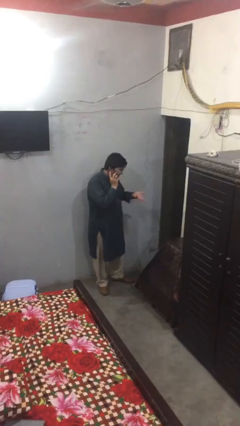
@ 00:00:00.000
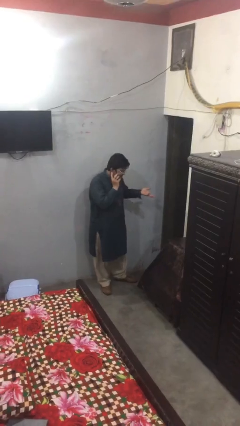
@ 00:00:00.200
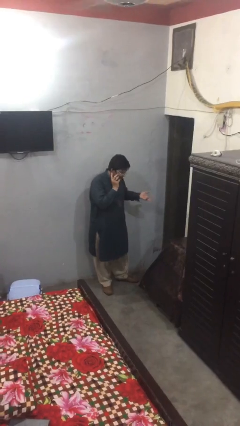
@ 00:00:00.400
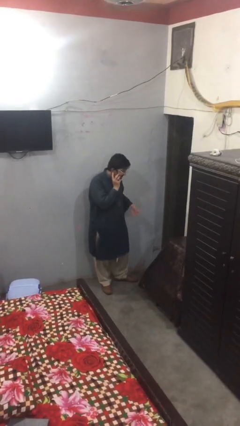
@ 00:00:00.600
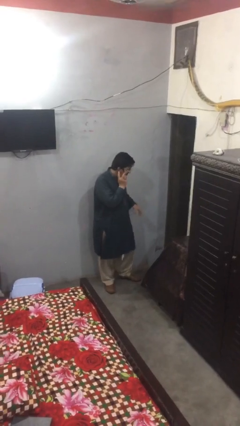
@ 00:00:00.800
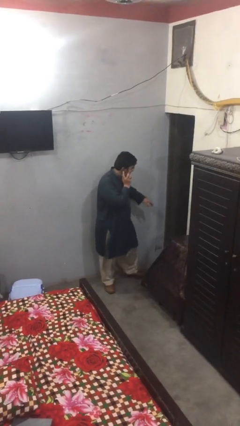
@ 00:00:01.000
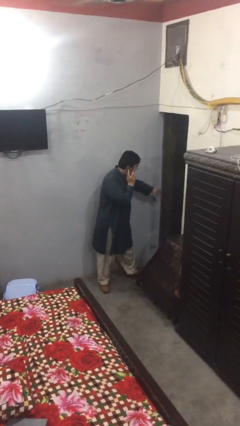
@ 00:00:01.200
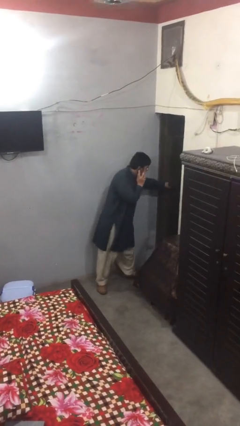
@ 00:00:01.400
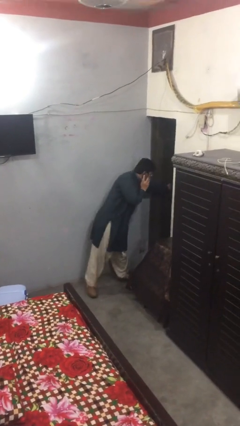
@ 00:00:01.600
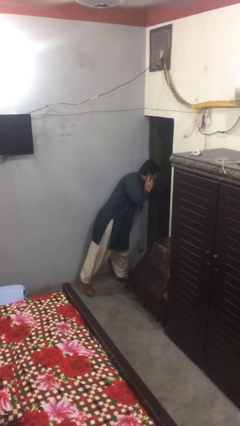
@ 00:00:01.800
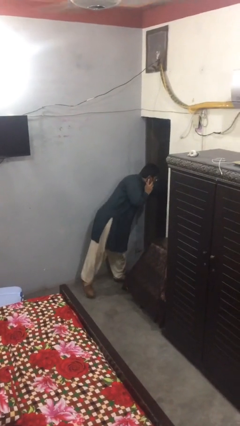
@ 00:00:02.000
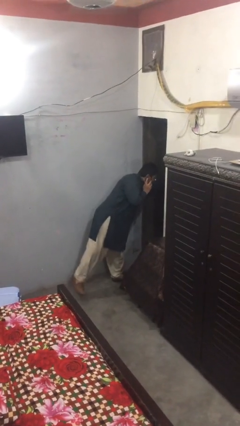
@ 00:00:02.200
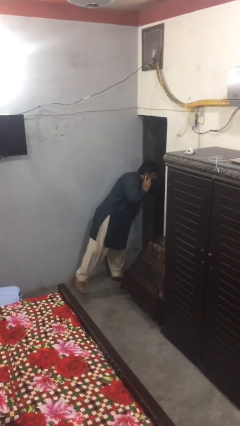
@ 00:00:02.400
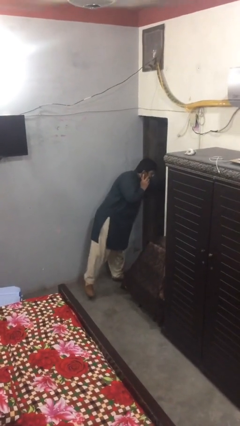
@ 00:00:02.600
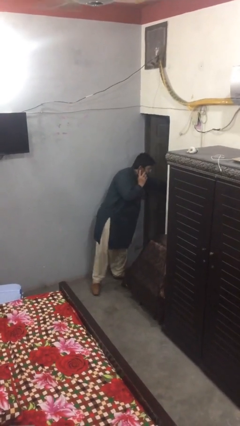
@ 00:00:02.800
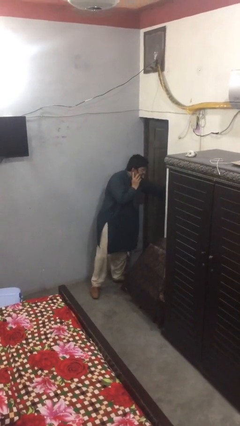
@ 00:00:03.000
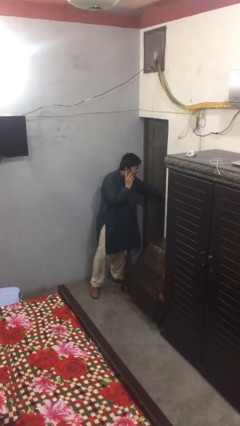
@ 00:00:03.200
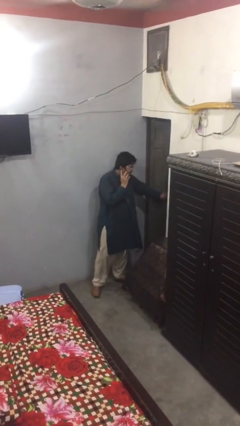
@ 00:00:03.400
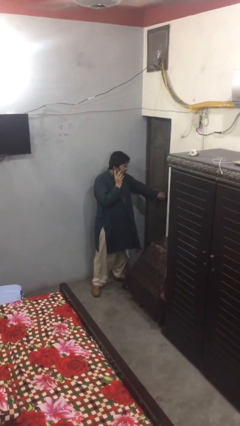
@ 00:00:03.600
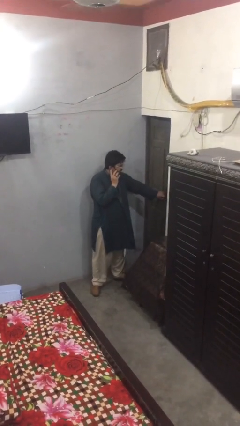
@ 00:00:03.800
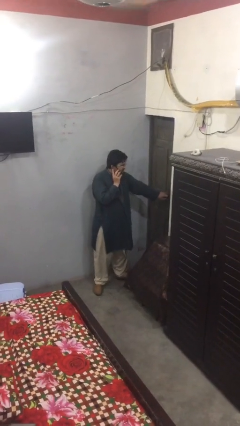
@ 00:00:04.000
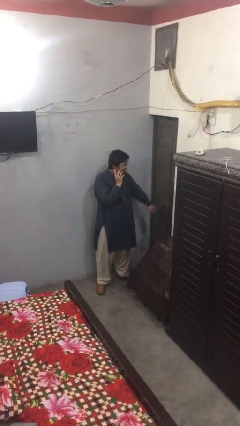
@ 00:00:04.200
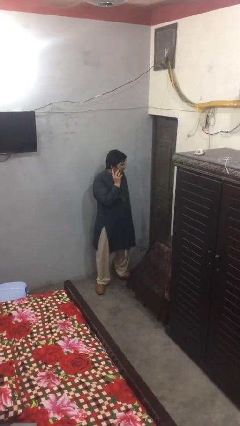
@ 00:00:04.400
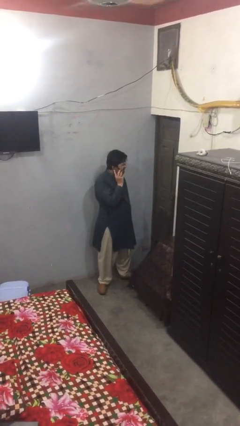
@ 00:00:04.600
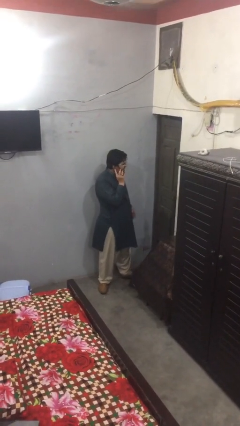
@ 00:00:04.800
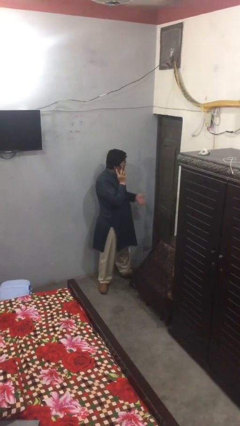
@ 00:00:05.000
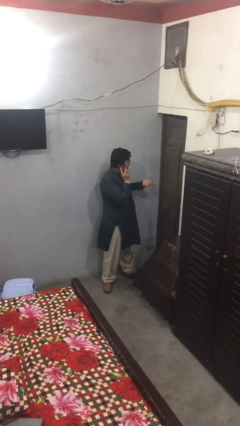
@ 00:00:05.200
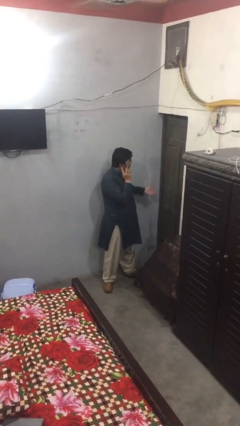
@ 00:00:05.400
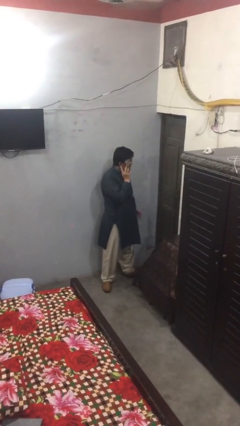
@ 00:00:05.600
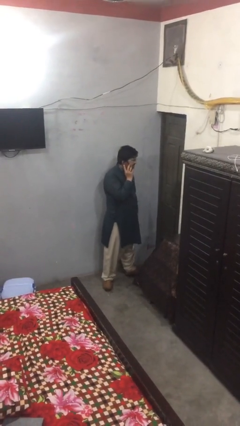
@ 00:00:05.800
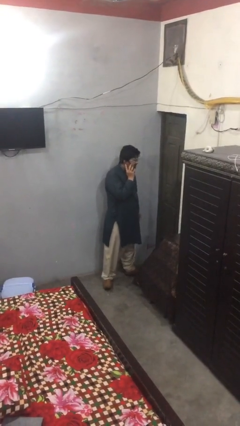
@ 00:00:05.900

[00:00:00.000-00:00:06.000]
person closes facility door

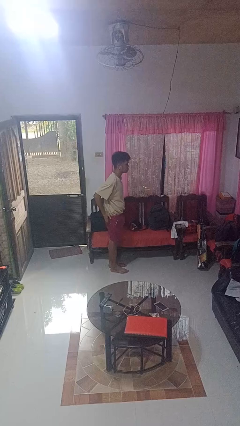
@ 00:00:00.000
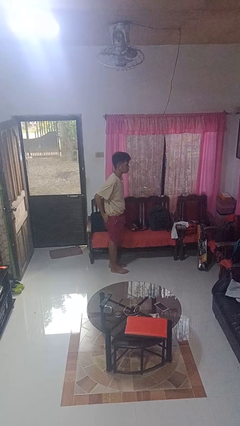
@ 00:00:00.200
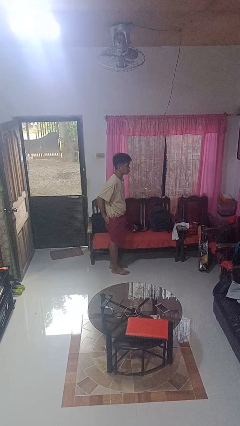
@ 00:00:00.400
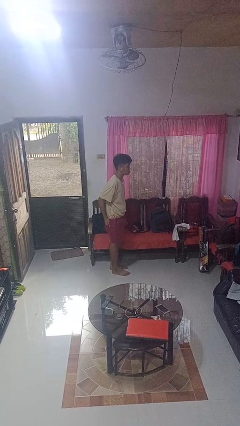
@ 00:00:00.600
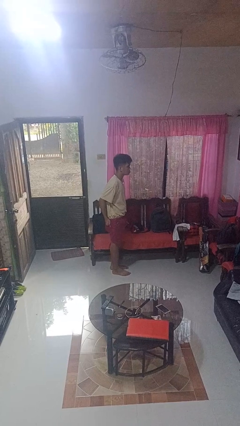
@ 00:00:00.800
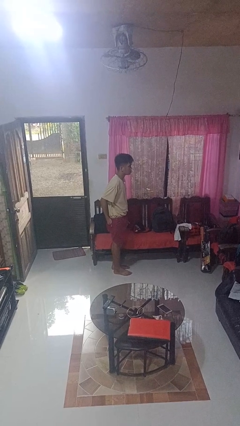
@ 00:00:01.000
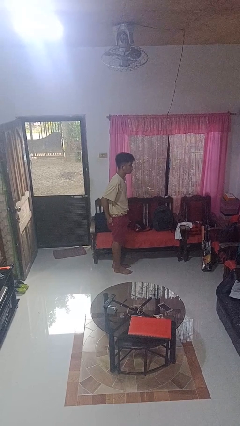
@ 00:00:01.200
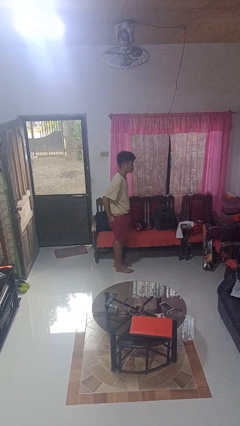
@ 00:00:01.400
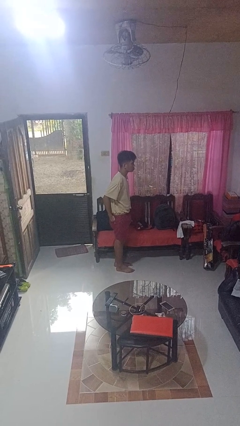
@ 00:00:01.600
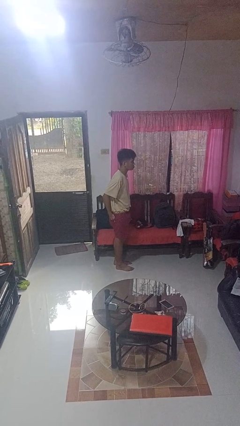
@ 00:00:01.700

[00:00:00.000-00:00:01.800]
person puts hands in back pockets

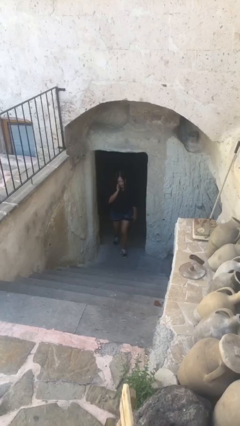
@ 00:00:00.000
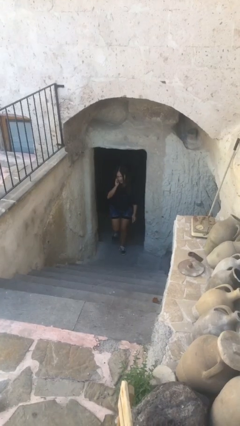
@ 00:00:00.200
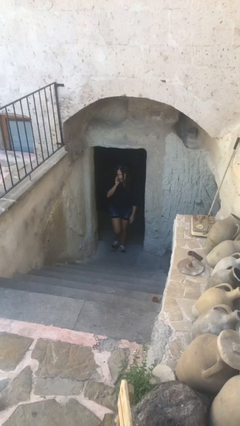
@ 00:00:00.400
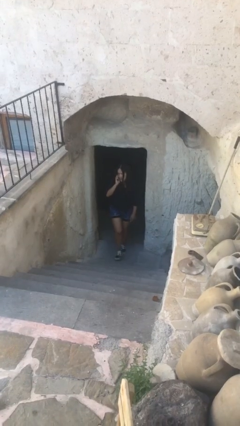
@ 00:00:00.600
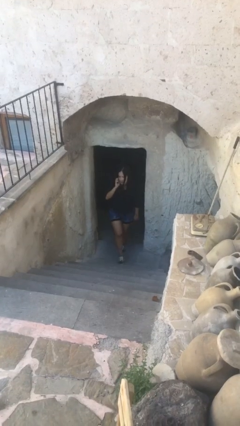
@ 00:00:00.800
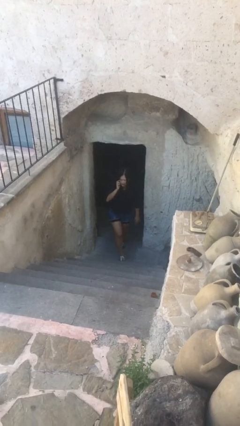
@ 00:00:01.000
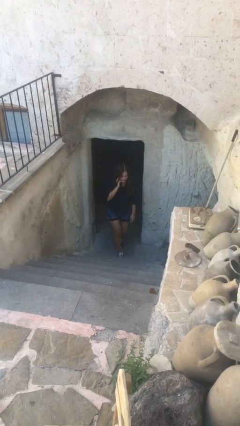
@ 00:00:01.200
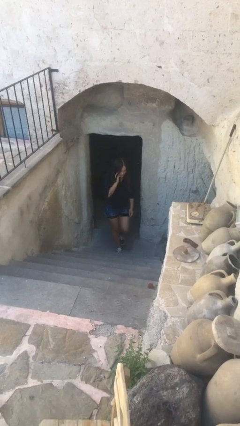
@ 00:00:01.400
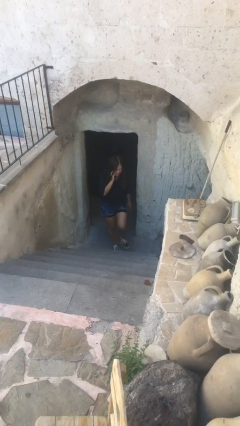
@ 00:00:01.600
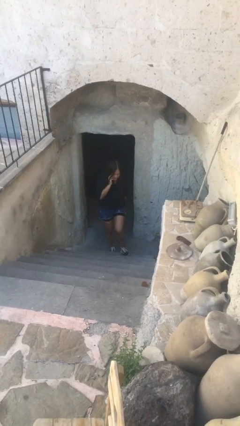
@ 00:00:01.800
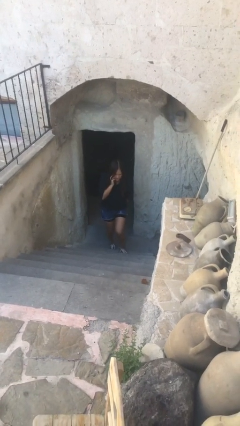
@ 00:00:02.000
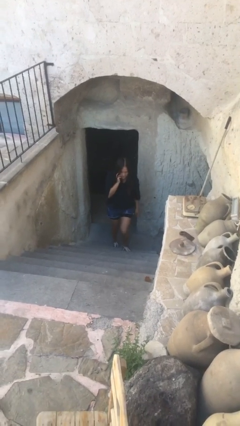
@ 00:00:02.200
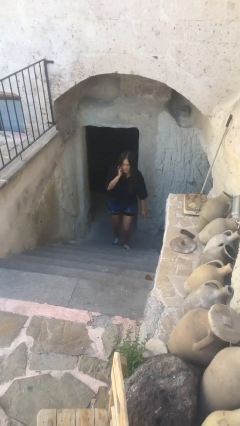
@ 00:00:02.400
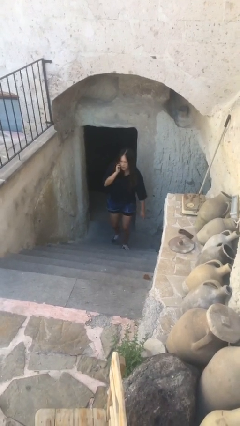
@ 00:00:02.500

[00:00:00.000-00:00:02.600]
person enters scene through structure

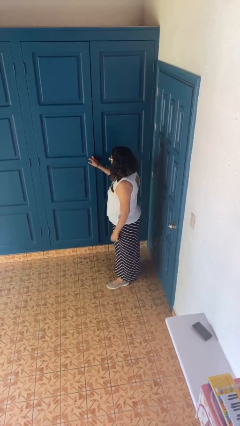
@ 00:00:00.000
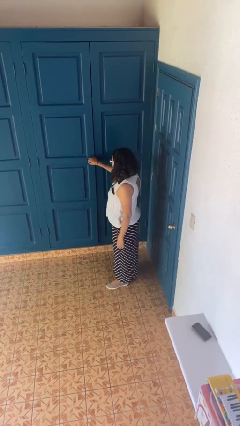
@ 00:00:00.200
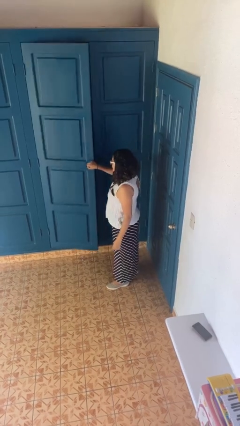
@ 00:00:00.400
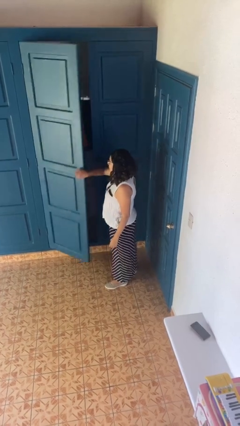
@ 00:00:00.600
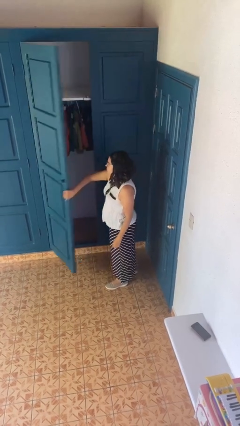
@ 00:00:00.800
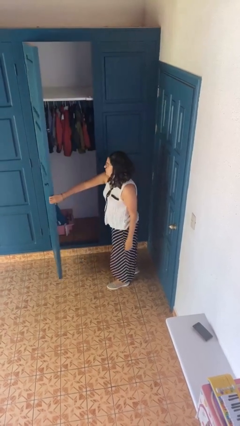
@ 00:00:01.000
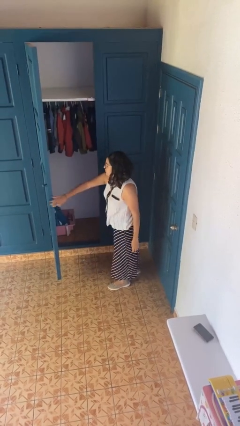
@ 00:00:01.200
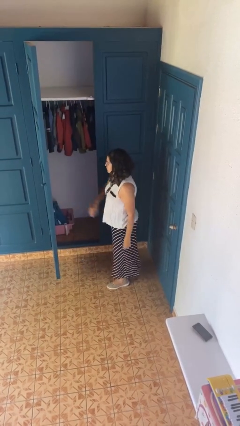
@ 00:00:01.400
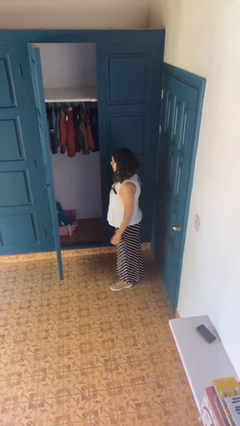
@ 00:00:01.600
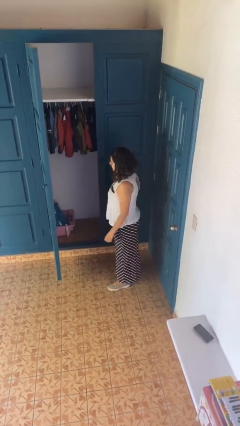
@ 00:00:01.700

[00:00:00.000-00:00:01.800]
person opens closet door

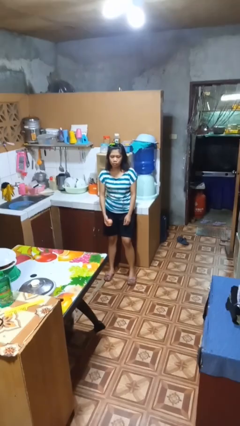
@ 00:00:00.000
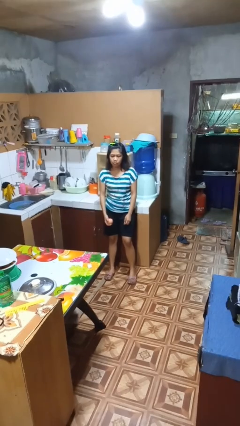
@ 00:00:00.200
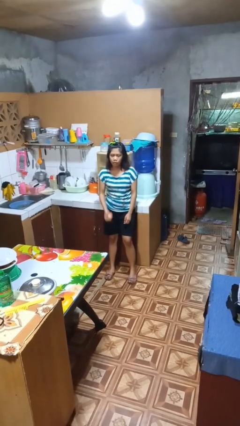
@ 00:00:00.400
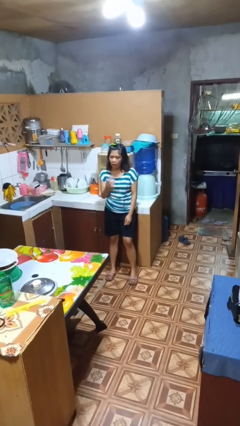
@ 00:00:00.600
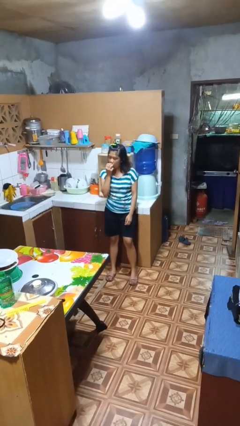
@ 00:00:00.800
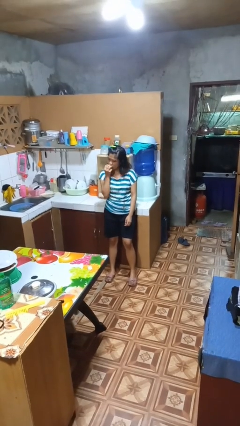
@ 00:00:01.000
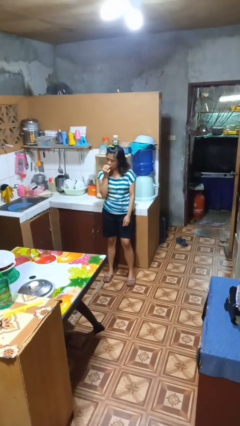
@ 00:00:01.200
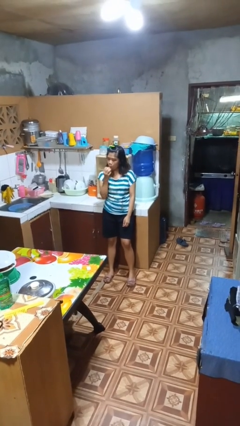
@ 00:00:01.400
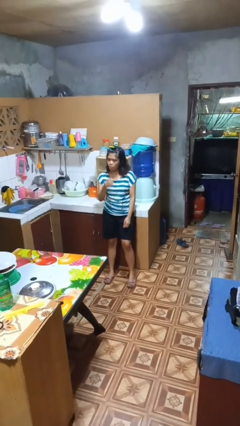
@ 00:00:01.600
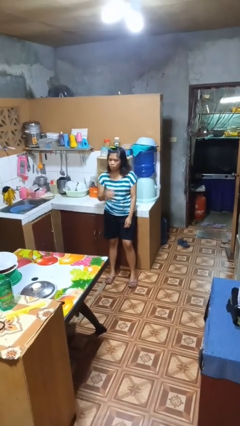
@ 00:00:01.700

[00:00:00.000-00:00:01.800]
person eats apple

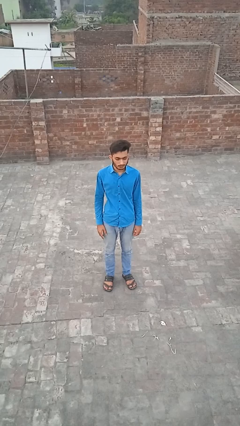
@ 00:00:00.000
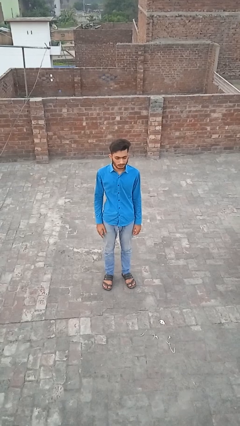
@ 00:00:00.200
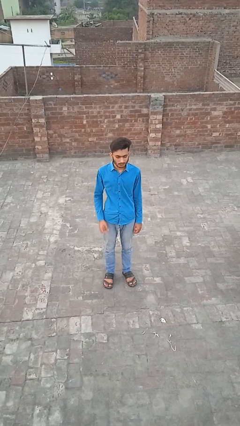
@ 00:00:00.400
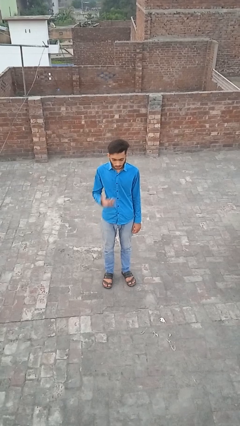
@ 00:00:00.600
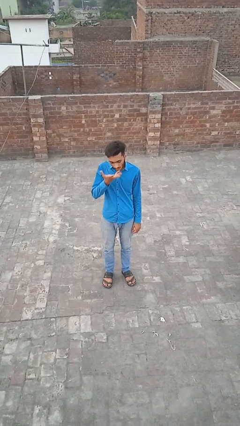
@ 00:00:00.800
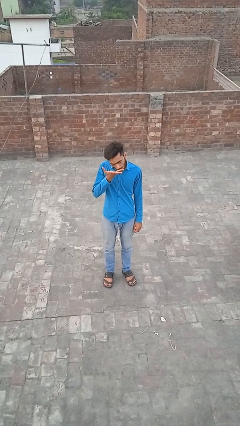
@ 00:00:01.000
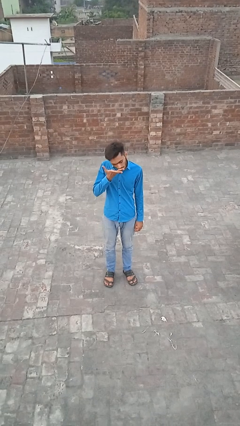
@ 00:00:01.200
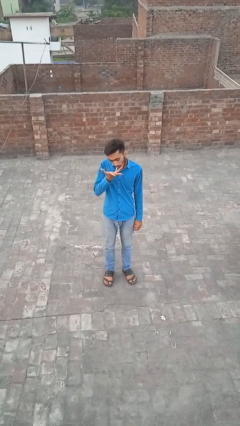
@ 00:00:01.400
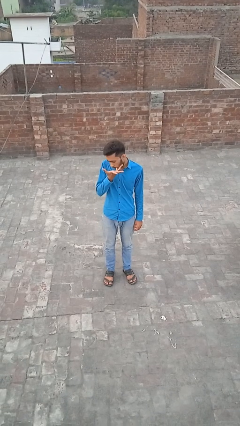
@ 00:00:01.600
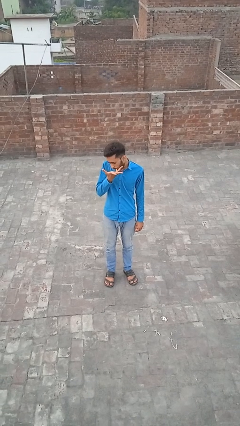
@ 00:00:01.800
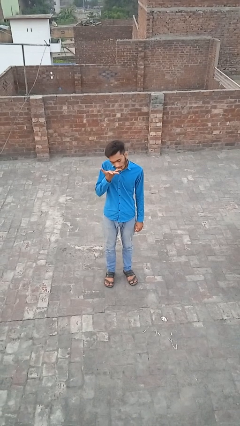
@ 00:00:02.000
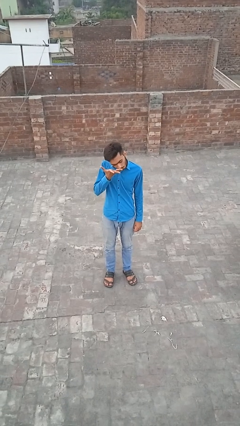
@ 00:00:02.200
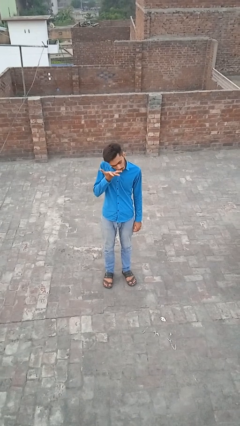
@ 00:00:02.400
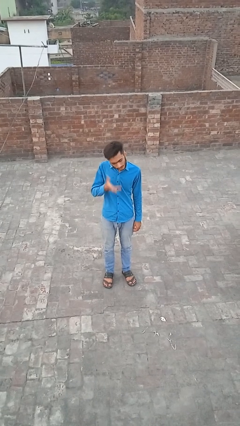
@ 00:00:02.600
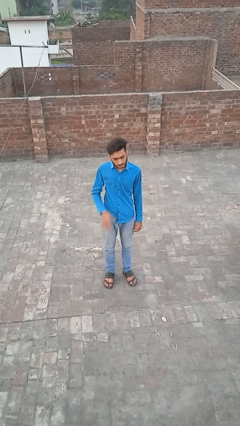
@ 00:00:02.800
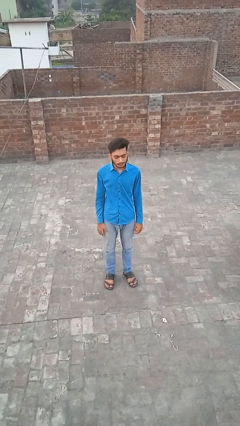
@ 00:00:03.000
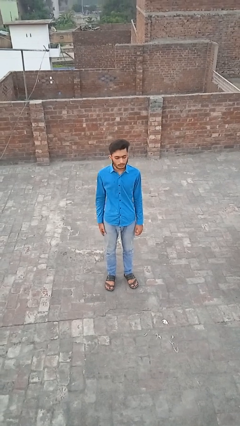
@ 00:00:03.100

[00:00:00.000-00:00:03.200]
person licks fingers

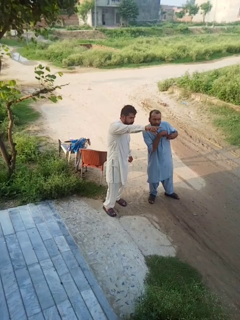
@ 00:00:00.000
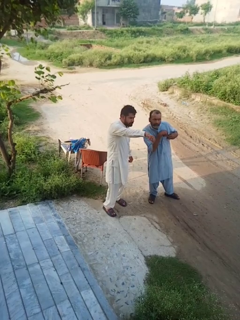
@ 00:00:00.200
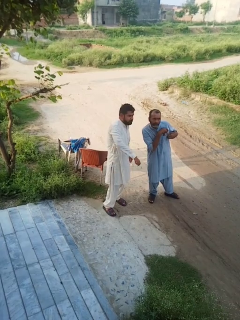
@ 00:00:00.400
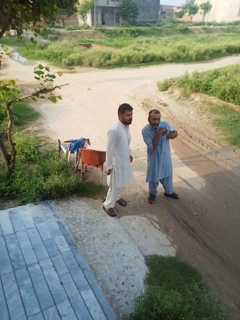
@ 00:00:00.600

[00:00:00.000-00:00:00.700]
person points at person
